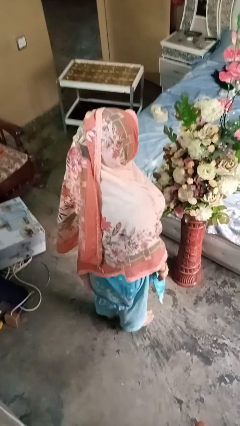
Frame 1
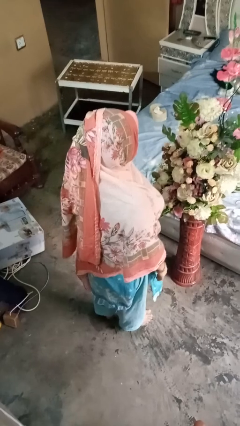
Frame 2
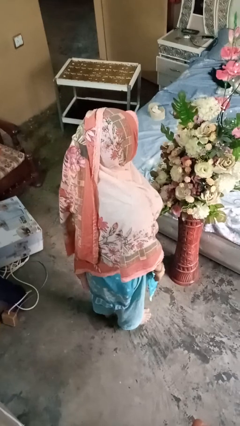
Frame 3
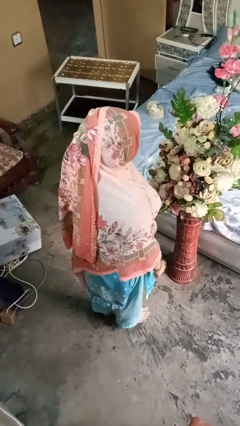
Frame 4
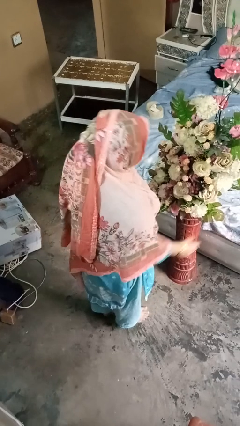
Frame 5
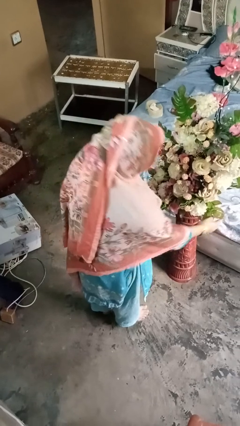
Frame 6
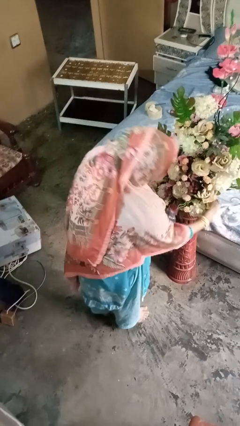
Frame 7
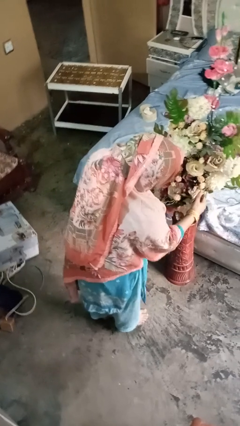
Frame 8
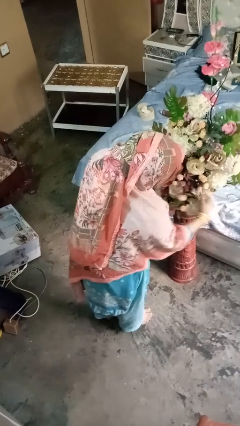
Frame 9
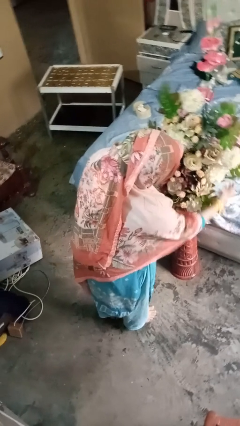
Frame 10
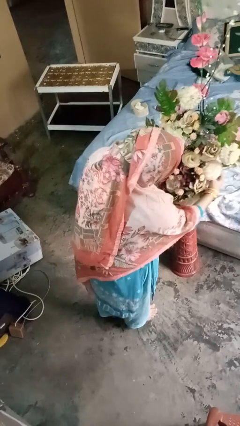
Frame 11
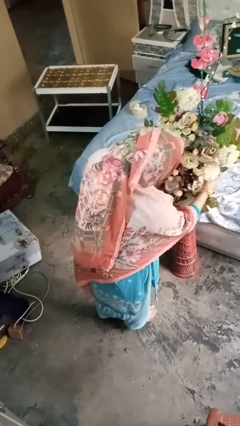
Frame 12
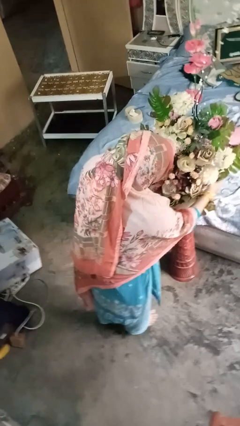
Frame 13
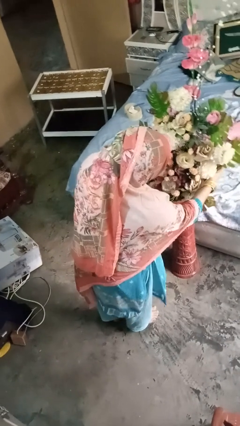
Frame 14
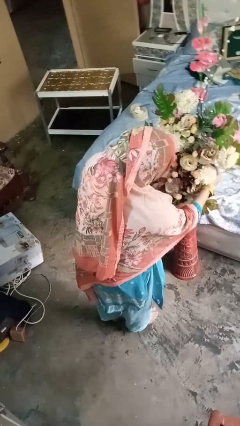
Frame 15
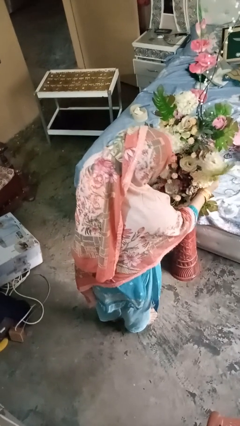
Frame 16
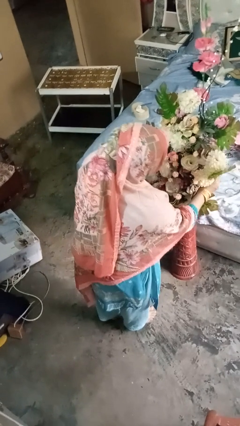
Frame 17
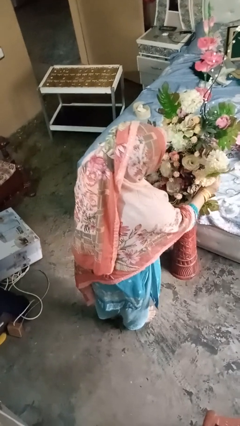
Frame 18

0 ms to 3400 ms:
person arranges flowers in vase

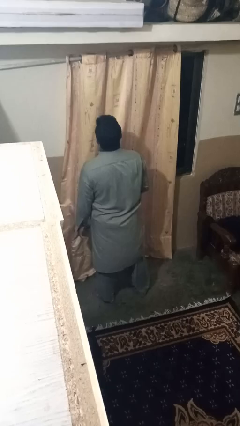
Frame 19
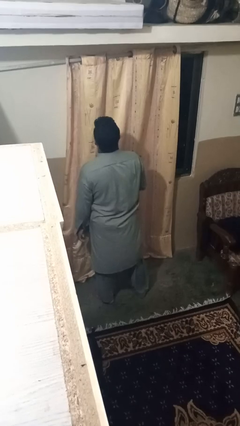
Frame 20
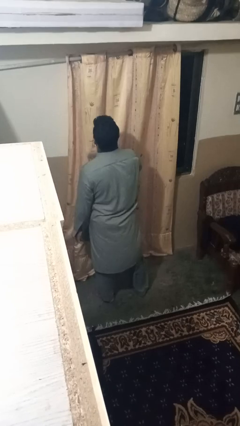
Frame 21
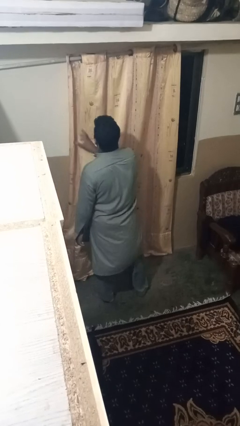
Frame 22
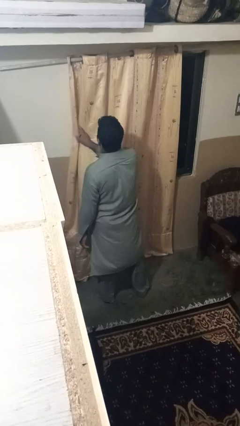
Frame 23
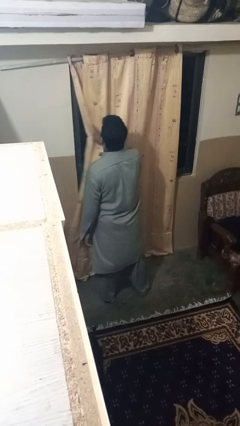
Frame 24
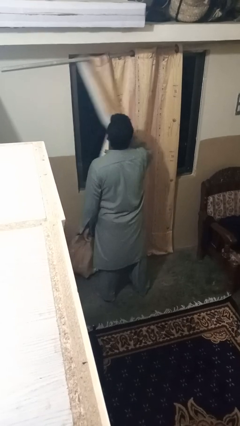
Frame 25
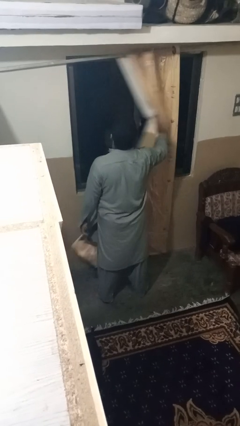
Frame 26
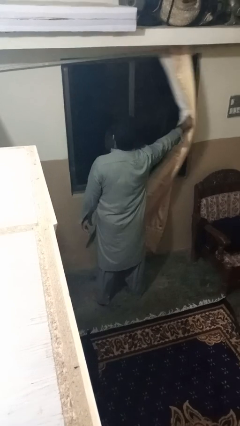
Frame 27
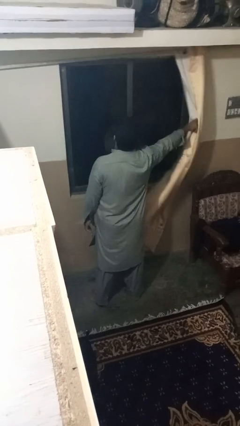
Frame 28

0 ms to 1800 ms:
person opens curtains

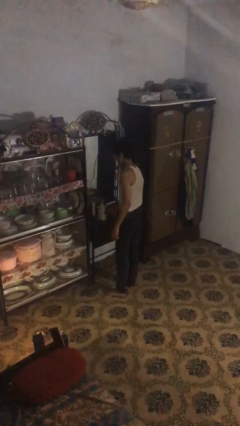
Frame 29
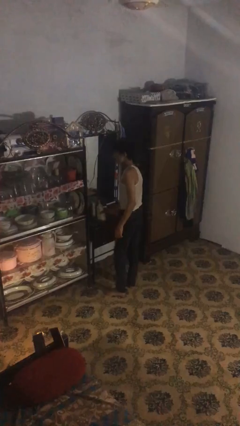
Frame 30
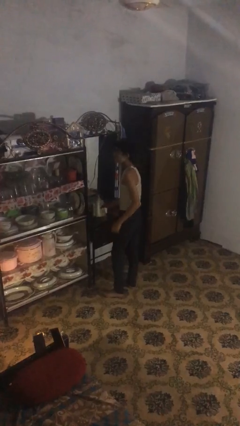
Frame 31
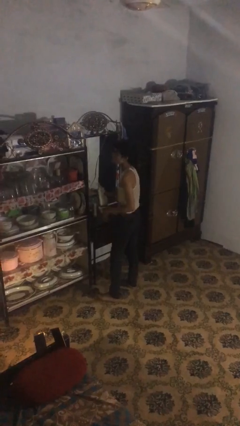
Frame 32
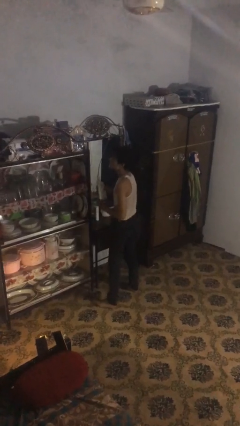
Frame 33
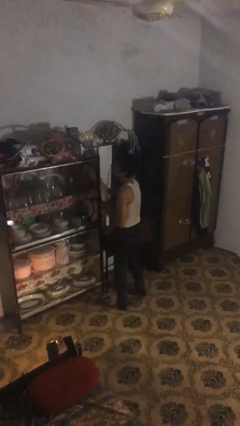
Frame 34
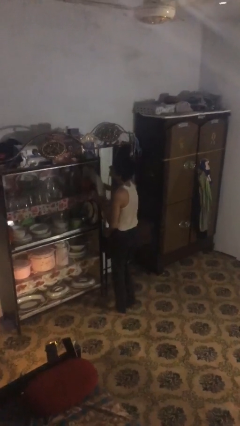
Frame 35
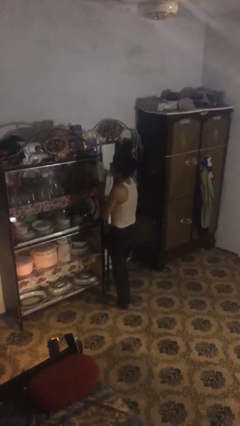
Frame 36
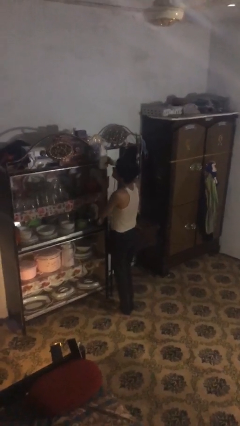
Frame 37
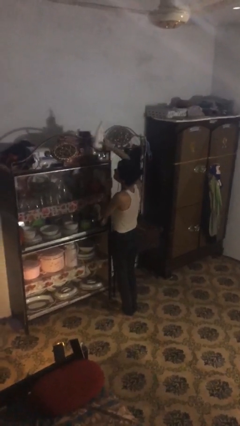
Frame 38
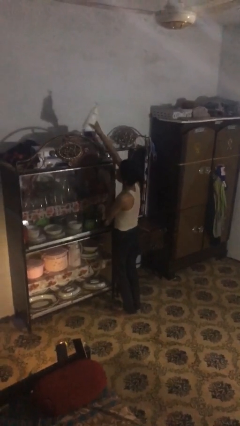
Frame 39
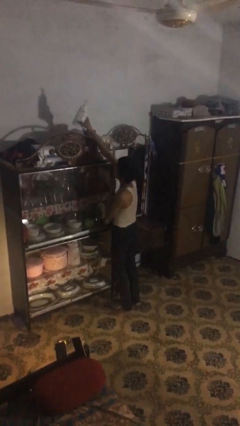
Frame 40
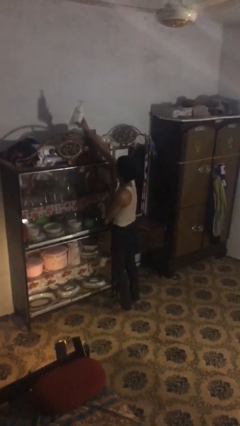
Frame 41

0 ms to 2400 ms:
person picks up object from table

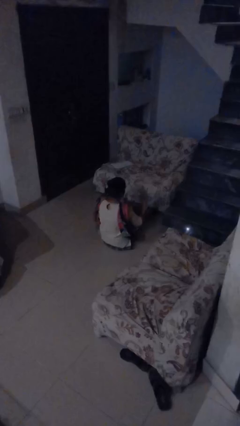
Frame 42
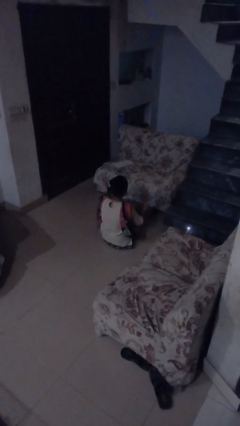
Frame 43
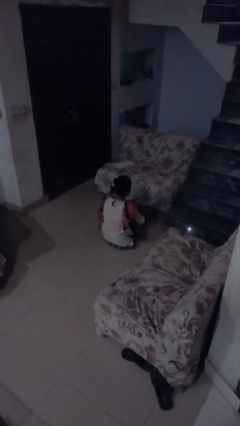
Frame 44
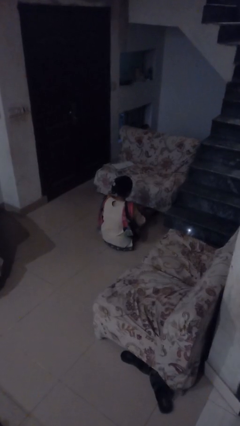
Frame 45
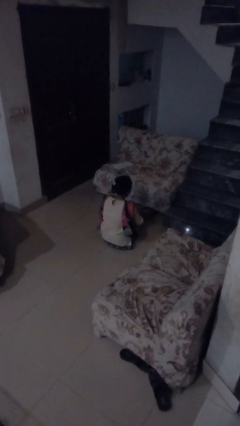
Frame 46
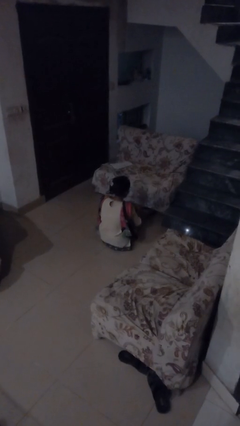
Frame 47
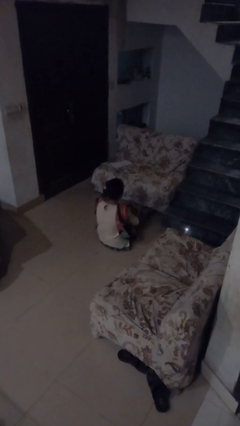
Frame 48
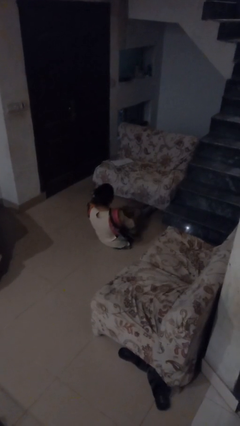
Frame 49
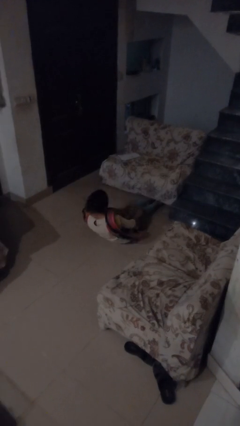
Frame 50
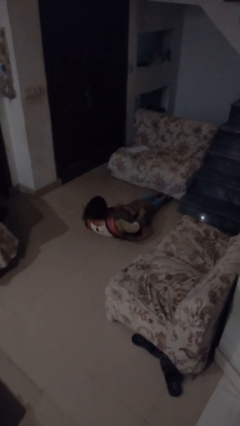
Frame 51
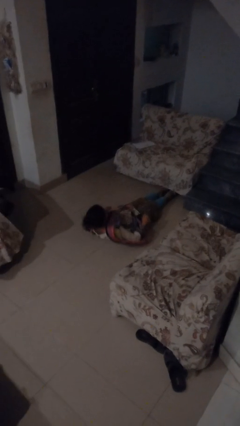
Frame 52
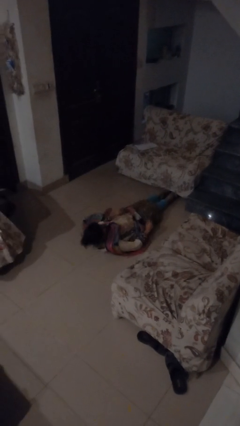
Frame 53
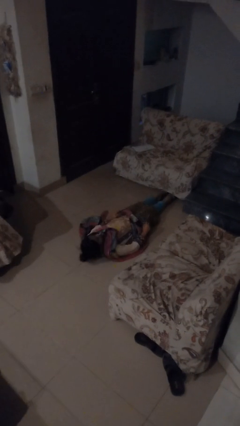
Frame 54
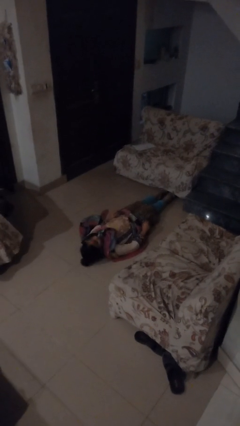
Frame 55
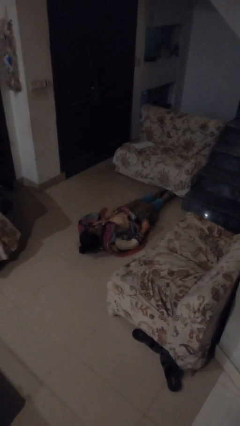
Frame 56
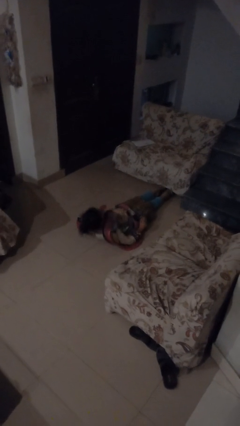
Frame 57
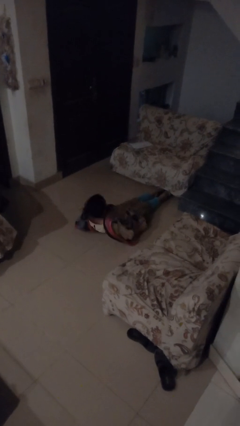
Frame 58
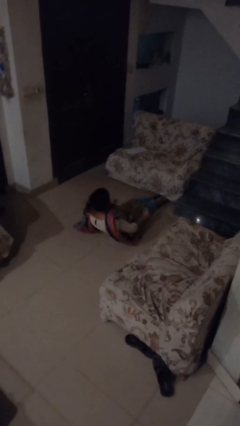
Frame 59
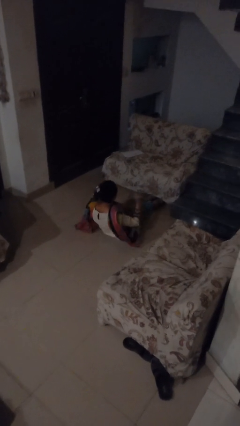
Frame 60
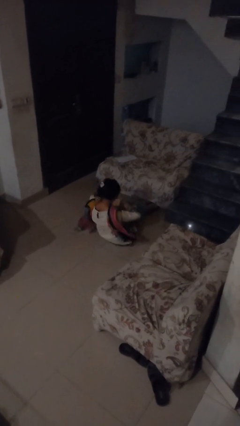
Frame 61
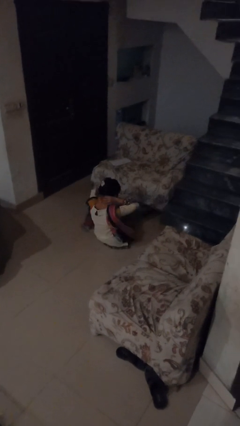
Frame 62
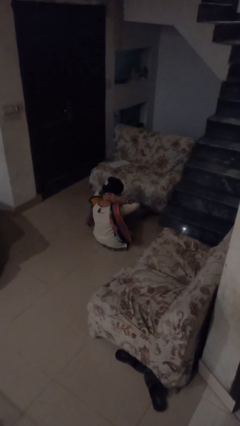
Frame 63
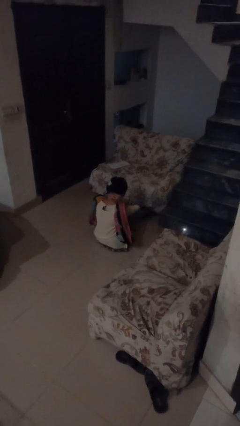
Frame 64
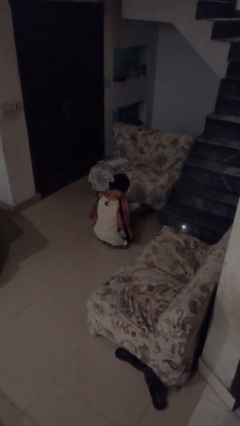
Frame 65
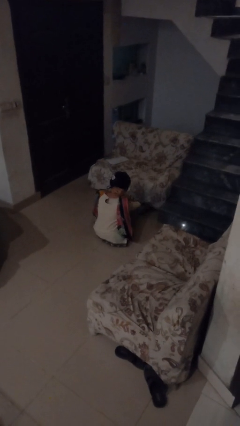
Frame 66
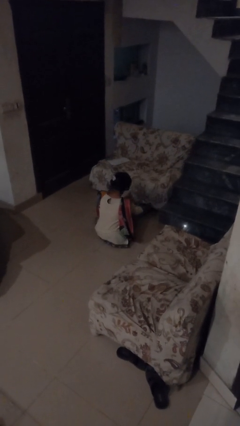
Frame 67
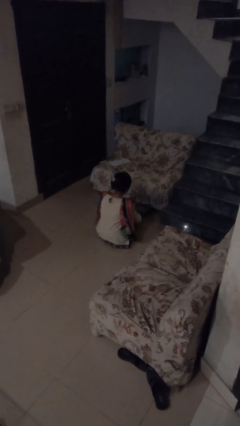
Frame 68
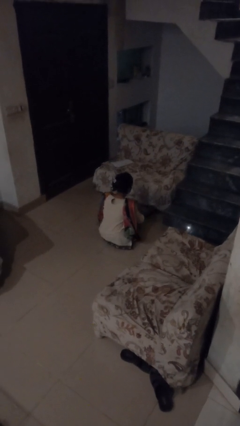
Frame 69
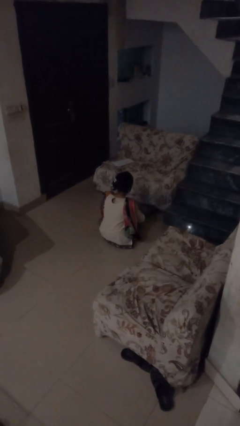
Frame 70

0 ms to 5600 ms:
person exercises with situp

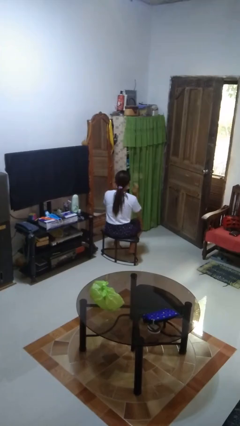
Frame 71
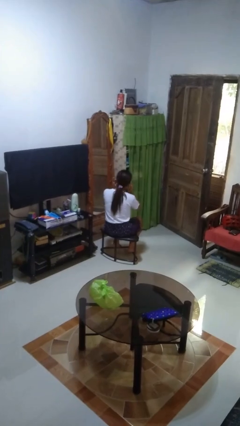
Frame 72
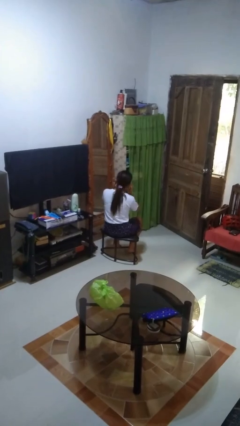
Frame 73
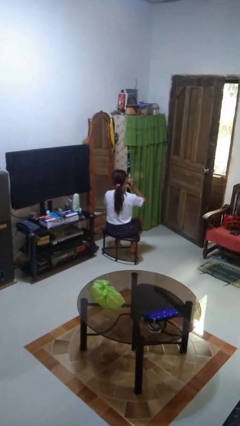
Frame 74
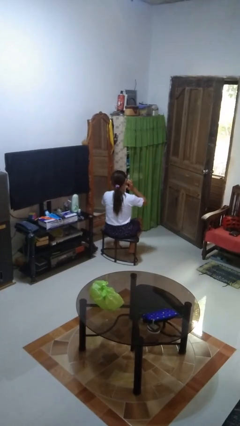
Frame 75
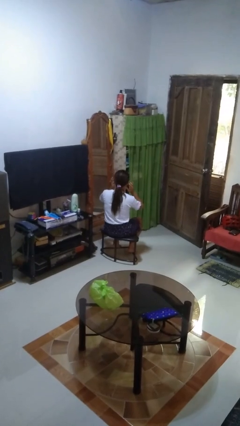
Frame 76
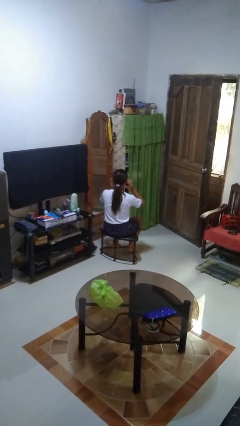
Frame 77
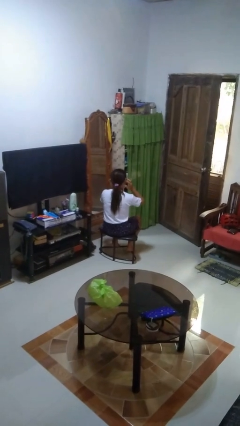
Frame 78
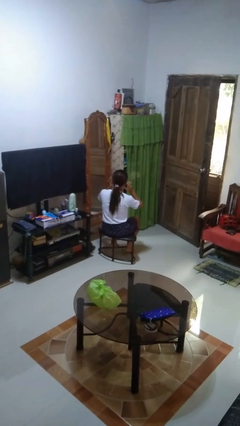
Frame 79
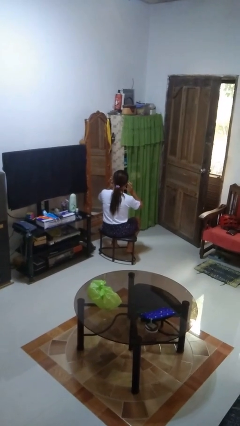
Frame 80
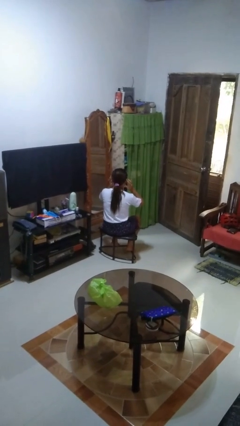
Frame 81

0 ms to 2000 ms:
person puts fingers in ear

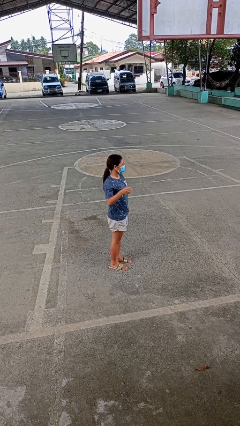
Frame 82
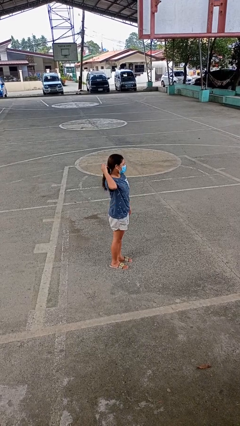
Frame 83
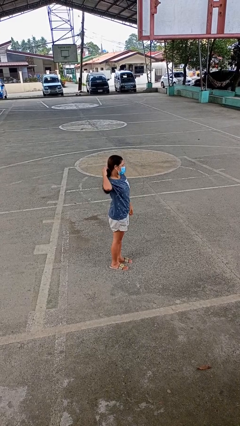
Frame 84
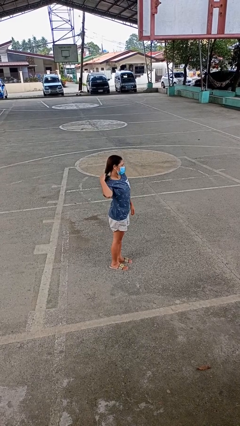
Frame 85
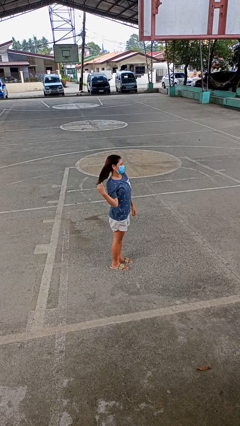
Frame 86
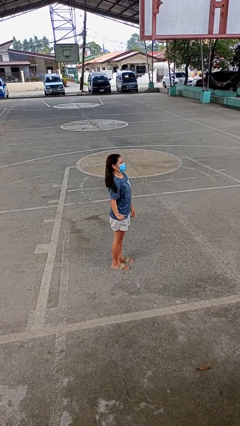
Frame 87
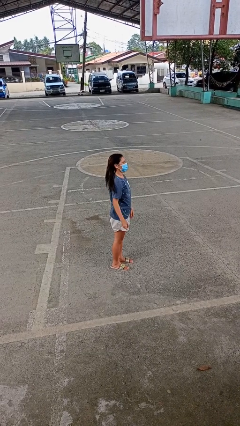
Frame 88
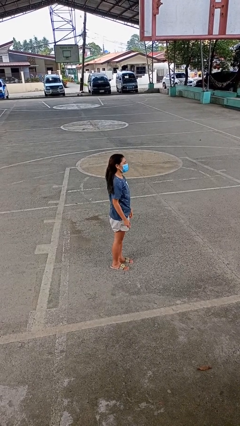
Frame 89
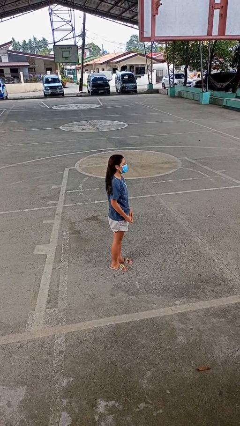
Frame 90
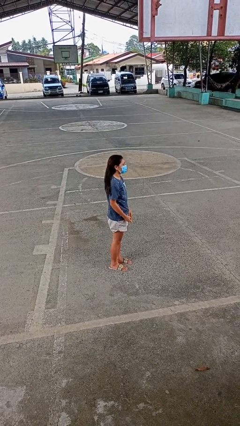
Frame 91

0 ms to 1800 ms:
person takes off hairtie

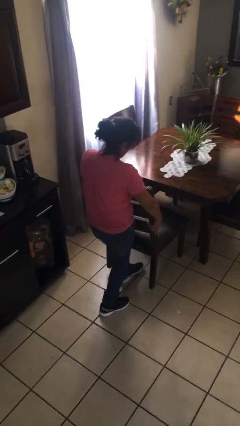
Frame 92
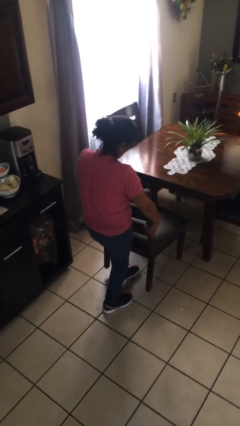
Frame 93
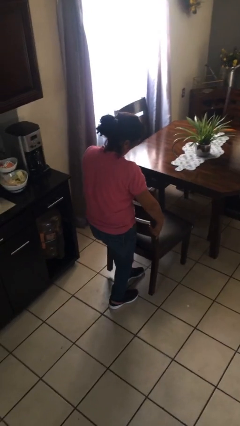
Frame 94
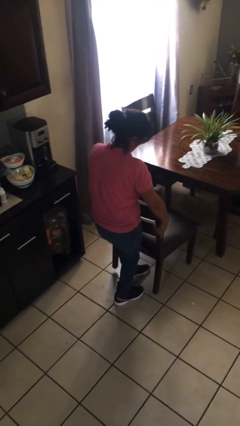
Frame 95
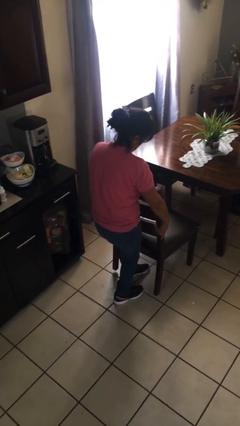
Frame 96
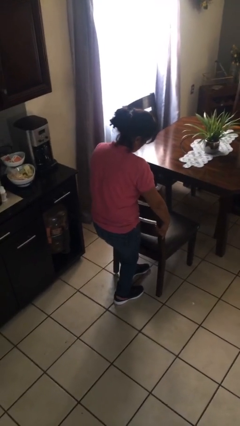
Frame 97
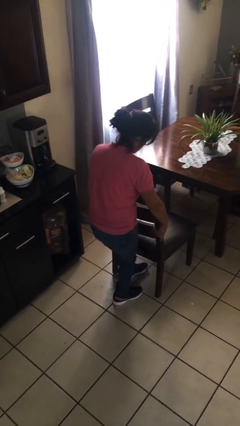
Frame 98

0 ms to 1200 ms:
person pulls out chair
